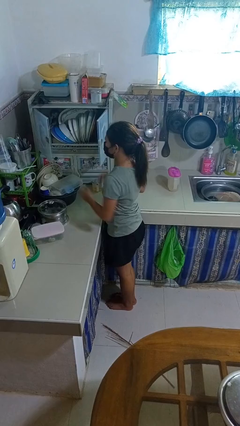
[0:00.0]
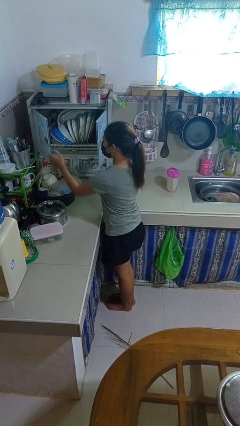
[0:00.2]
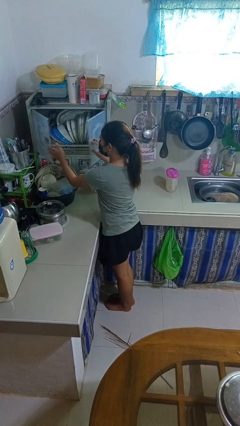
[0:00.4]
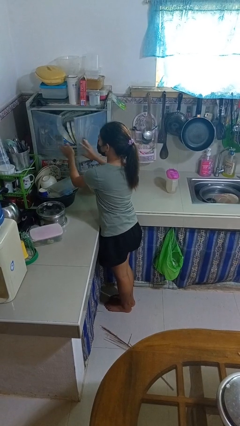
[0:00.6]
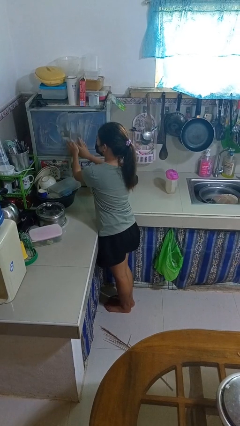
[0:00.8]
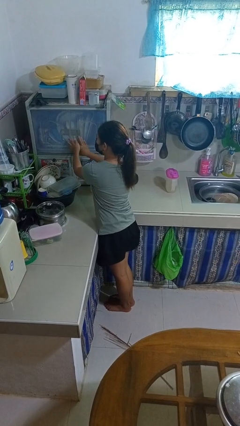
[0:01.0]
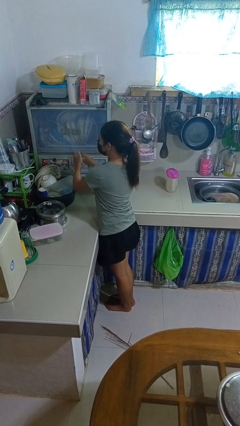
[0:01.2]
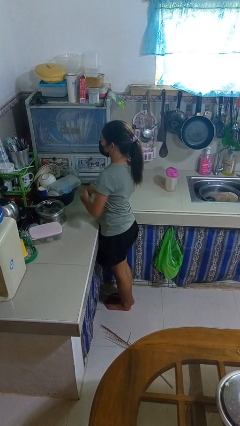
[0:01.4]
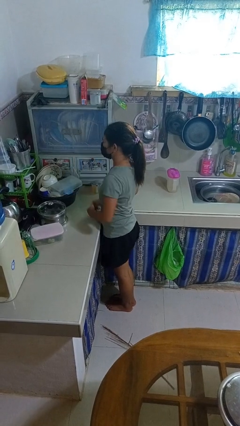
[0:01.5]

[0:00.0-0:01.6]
person closes kitchen drawer

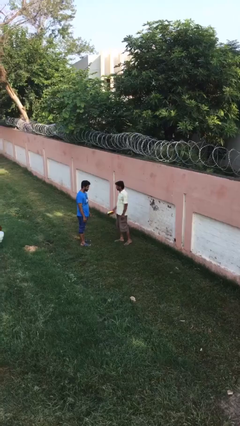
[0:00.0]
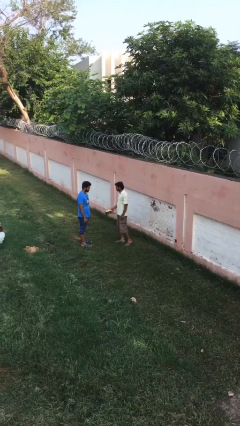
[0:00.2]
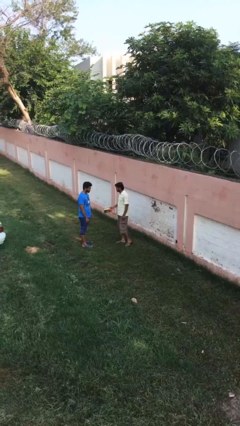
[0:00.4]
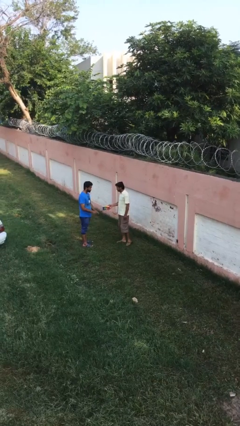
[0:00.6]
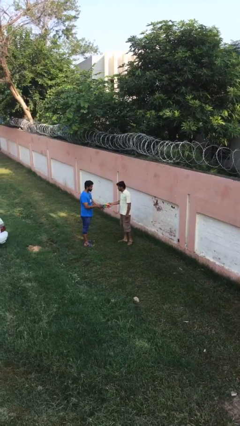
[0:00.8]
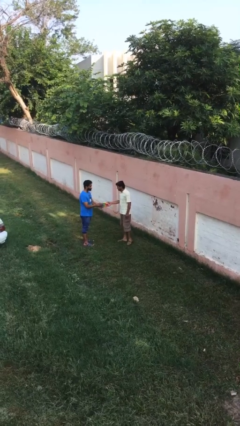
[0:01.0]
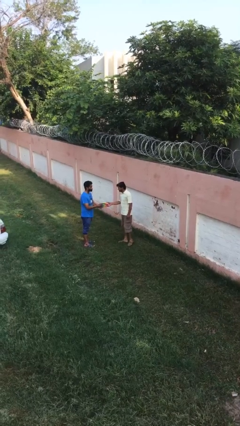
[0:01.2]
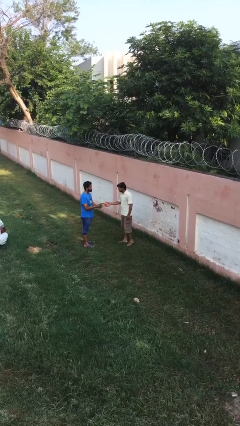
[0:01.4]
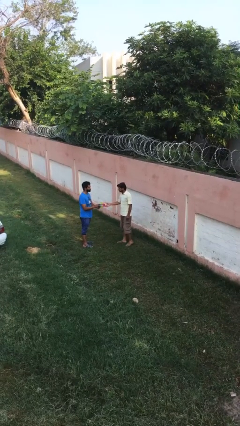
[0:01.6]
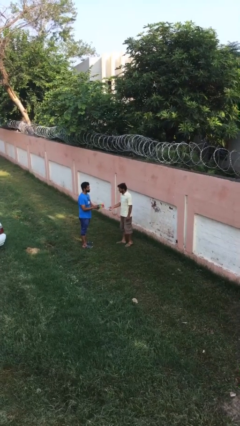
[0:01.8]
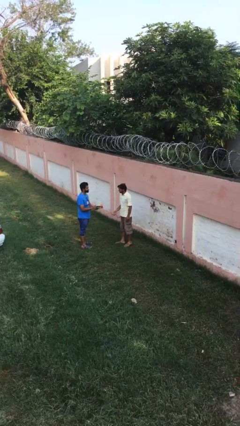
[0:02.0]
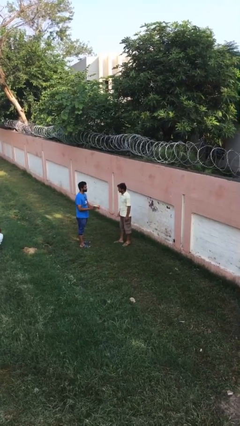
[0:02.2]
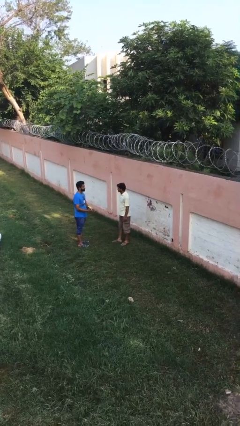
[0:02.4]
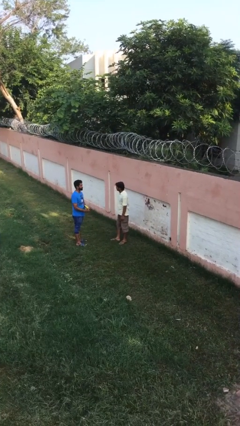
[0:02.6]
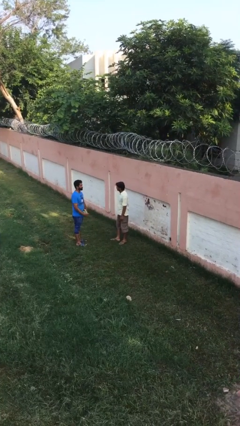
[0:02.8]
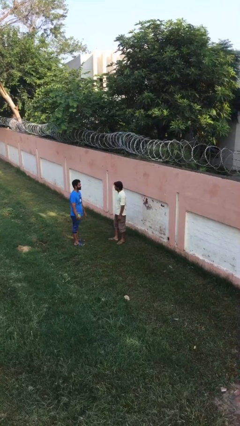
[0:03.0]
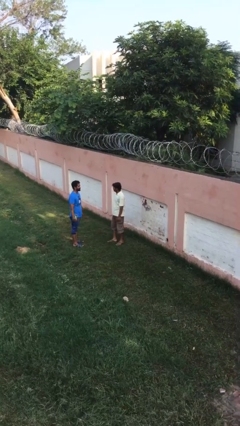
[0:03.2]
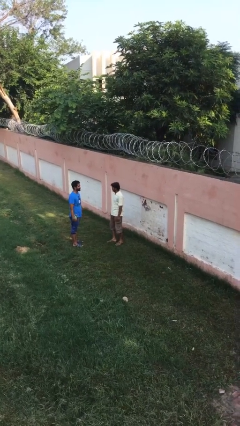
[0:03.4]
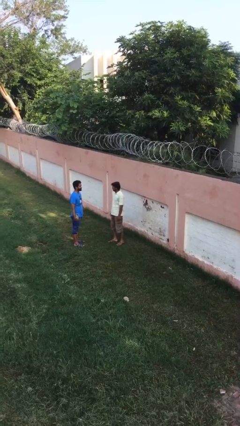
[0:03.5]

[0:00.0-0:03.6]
person transfers object to person

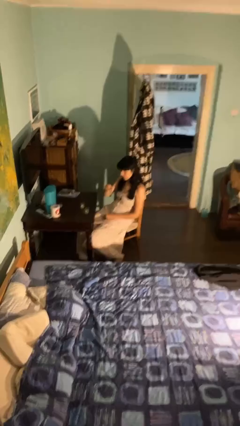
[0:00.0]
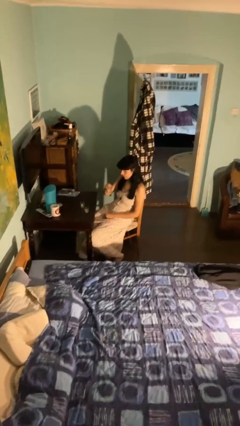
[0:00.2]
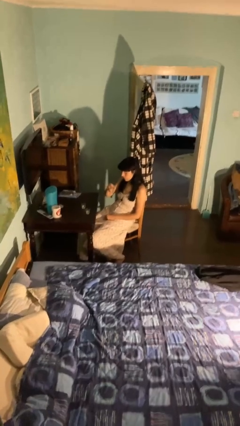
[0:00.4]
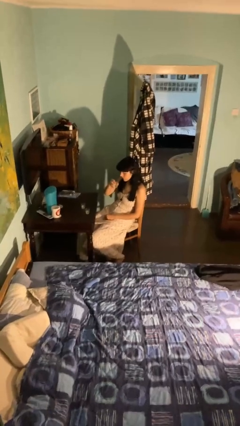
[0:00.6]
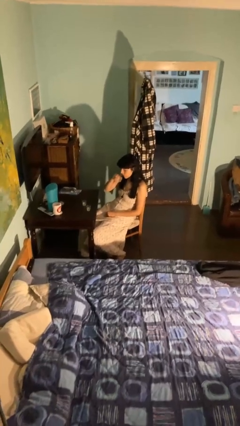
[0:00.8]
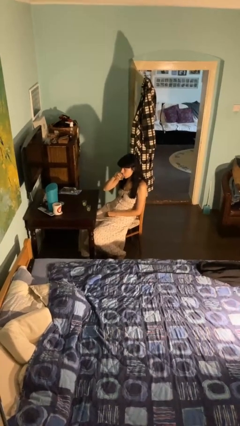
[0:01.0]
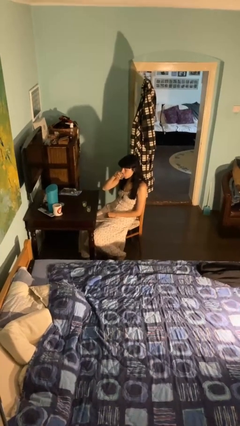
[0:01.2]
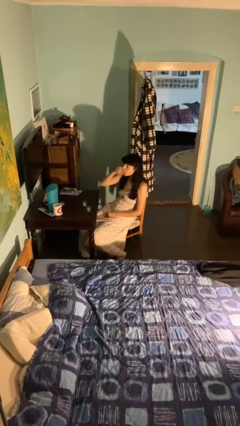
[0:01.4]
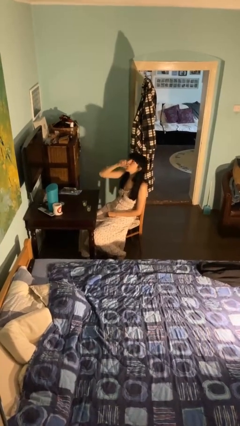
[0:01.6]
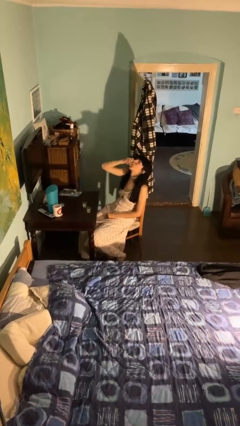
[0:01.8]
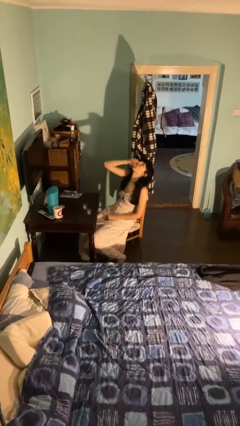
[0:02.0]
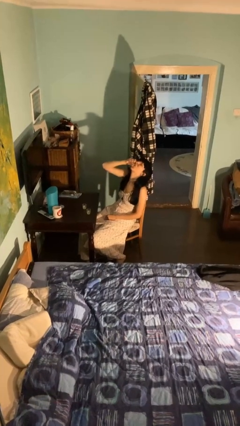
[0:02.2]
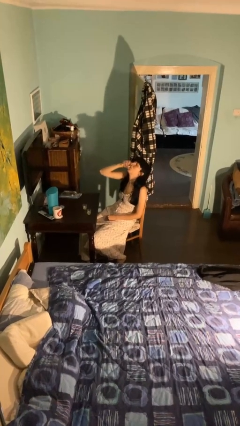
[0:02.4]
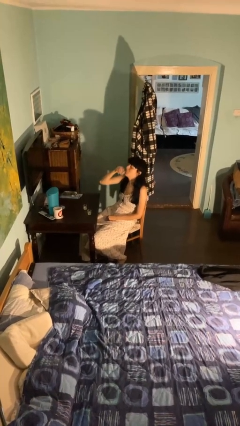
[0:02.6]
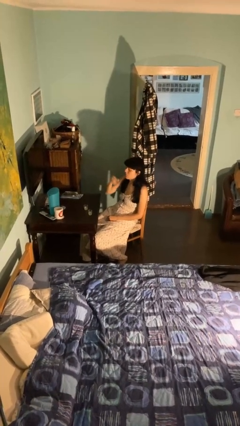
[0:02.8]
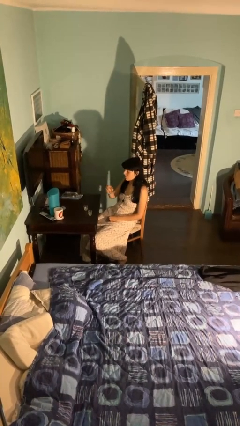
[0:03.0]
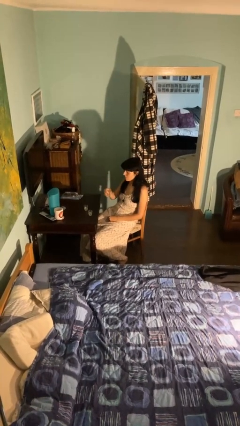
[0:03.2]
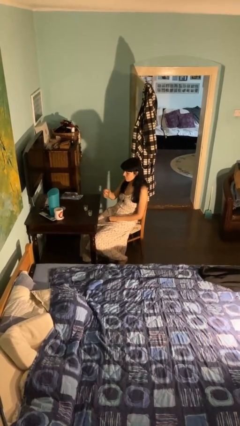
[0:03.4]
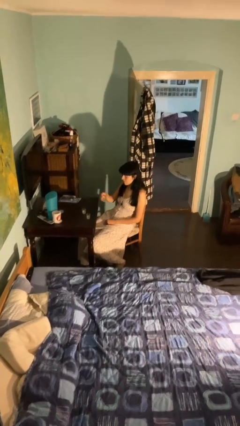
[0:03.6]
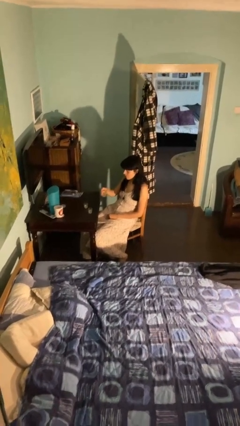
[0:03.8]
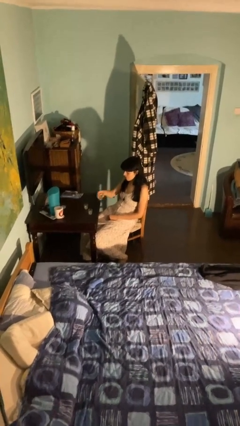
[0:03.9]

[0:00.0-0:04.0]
person drinks from shotglass

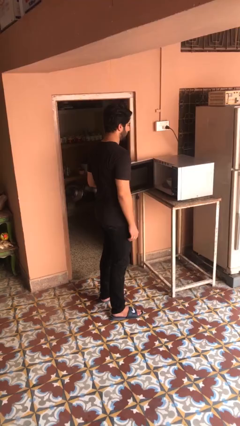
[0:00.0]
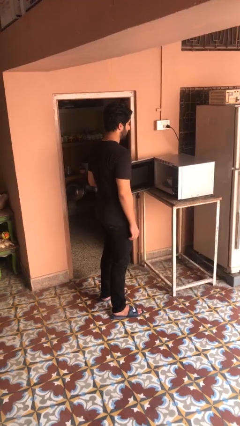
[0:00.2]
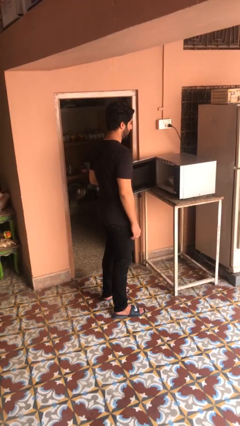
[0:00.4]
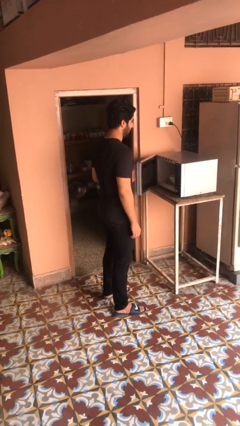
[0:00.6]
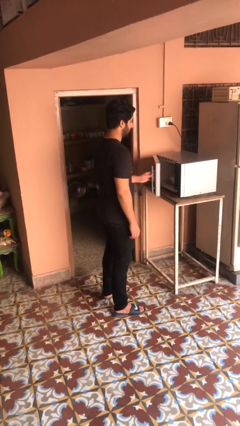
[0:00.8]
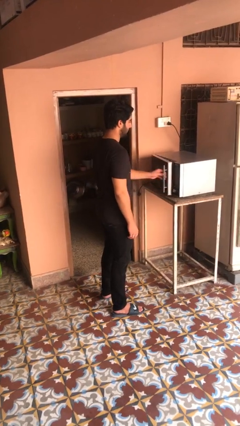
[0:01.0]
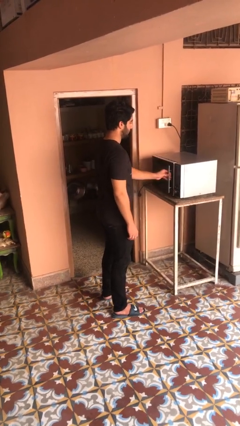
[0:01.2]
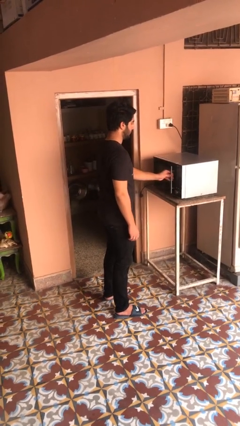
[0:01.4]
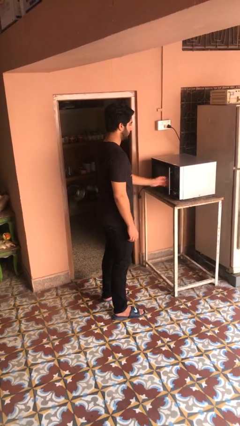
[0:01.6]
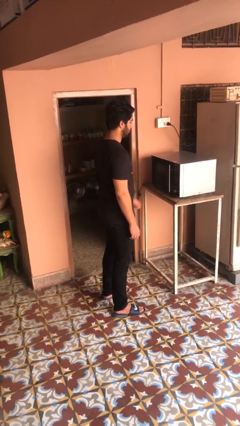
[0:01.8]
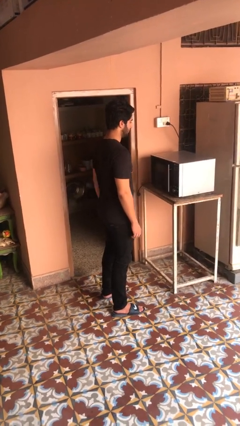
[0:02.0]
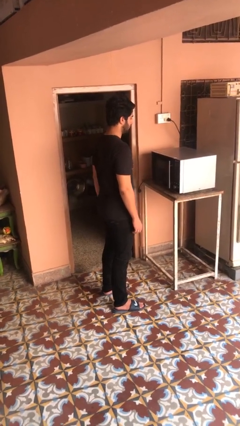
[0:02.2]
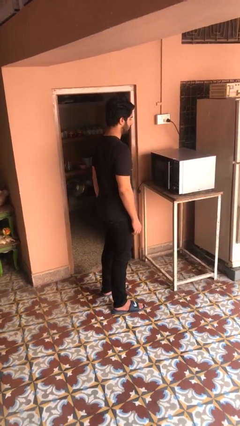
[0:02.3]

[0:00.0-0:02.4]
person closes microwave

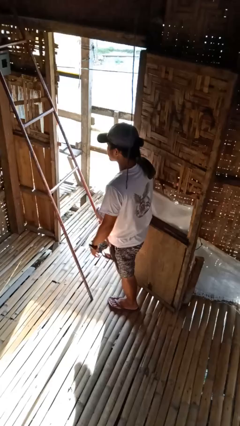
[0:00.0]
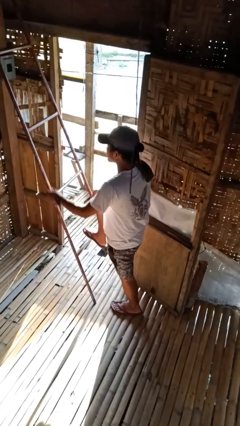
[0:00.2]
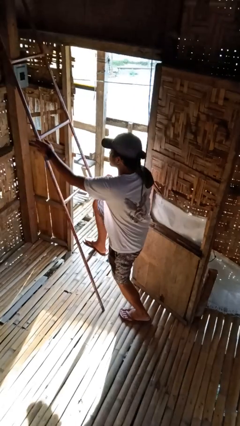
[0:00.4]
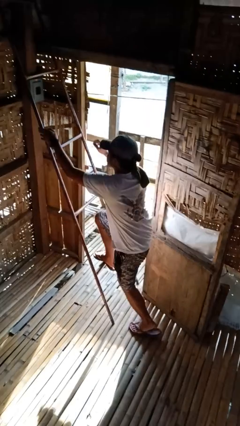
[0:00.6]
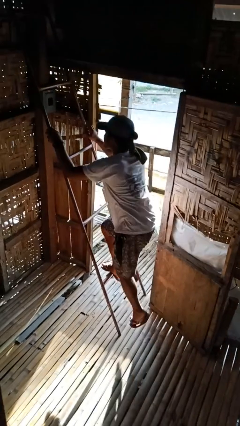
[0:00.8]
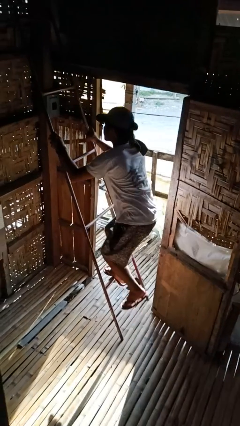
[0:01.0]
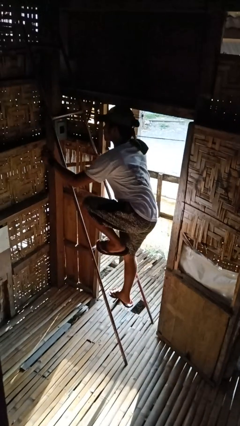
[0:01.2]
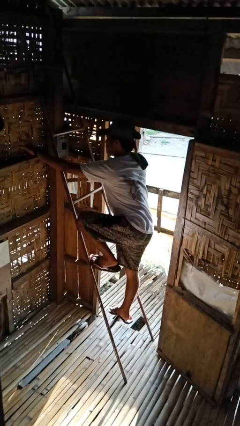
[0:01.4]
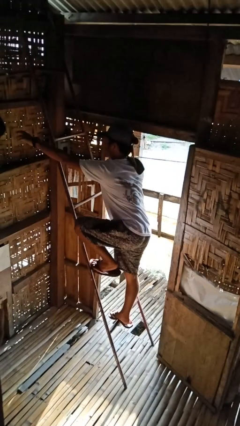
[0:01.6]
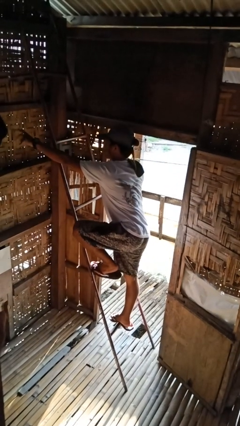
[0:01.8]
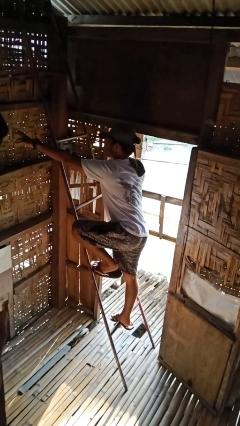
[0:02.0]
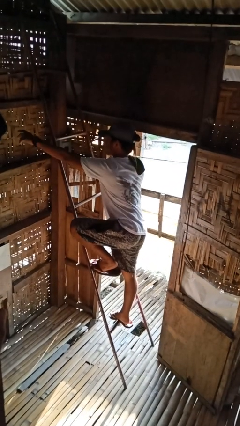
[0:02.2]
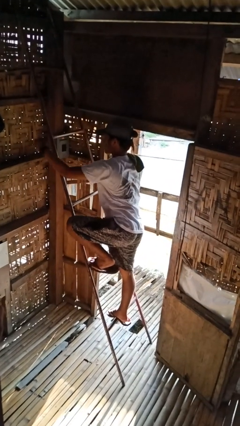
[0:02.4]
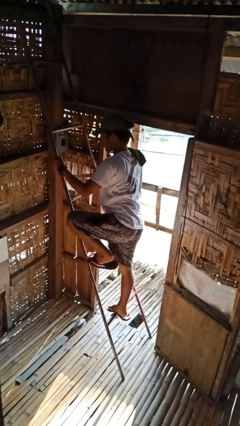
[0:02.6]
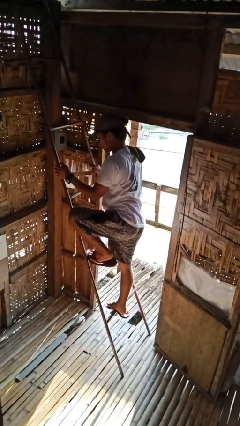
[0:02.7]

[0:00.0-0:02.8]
person climbs up ladder

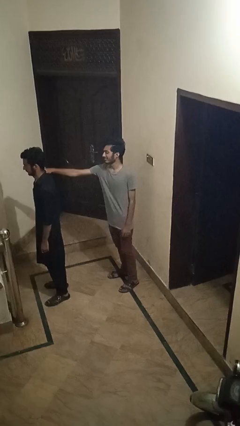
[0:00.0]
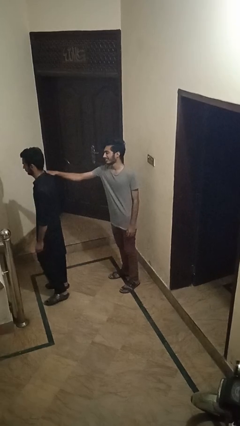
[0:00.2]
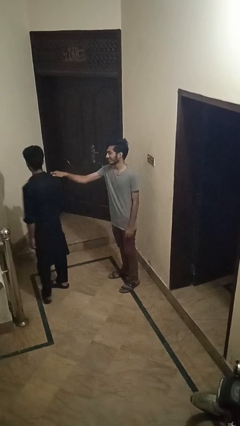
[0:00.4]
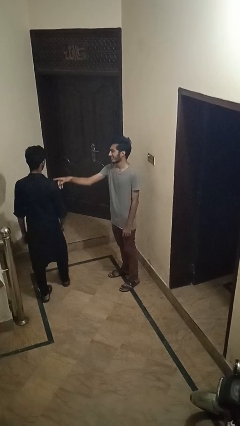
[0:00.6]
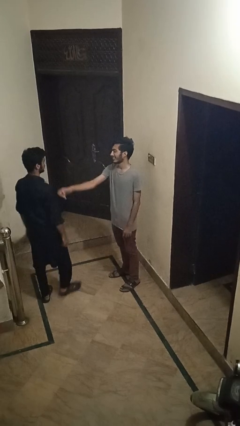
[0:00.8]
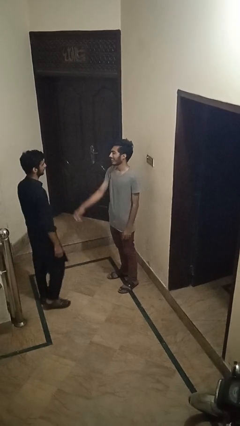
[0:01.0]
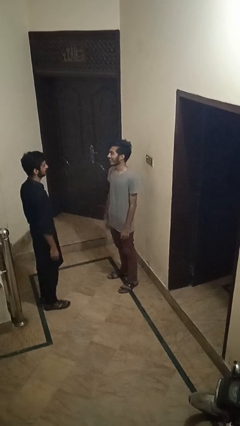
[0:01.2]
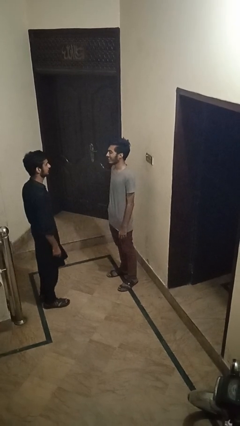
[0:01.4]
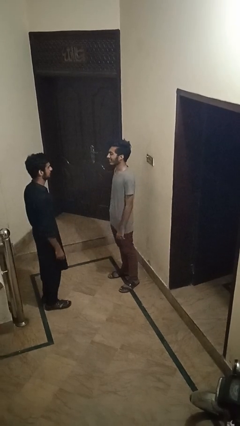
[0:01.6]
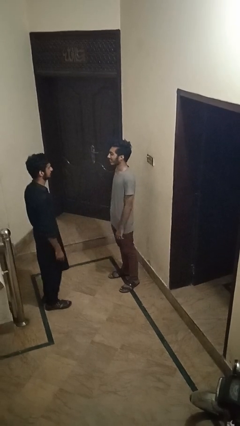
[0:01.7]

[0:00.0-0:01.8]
person spins person around

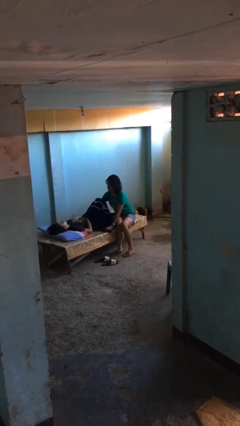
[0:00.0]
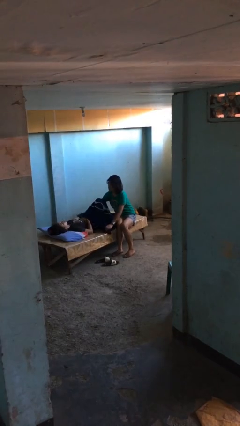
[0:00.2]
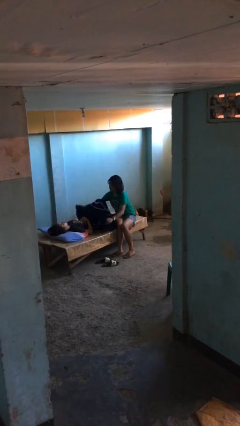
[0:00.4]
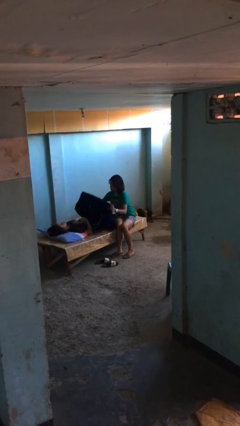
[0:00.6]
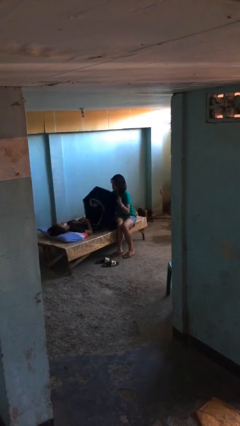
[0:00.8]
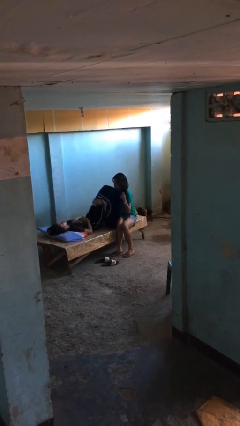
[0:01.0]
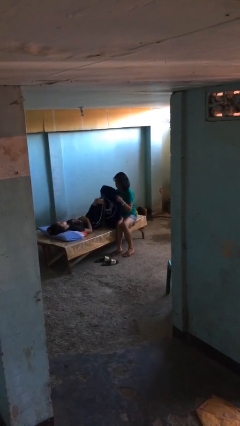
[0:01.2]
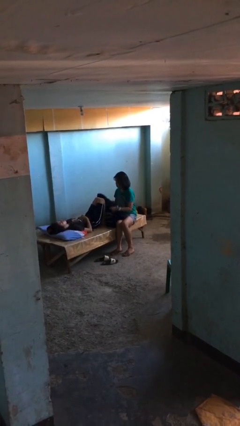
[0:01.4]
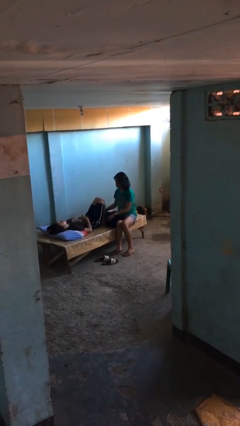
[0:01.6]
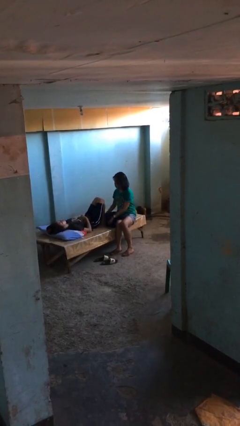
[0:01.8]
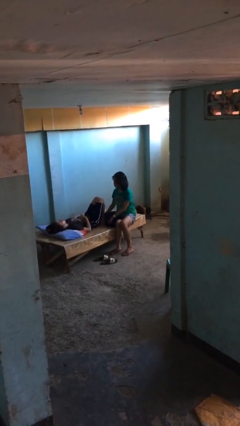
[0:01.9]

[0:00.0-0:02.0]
person uncovers friend with blanket
